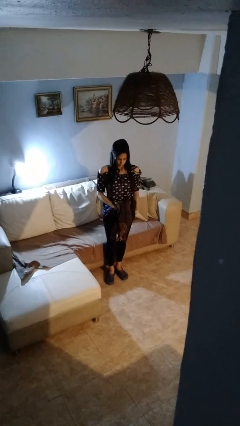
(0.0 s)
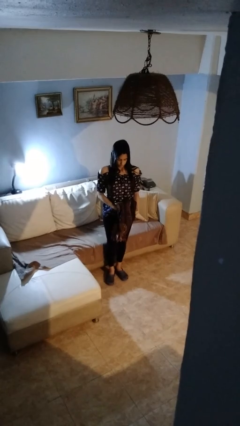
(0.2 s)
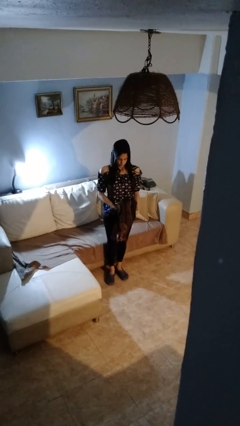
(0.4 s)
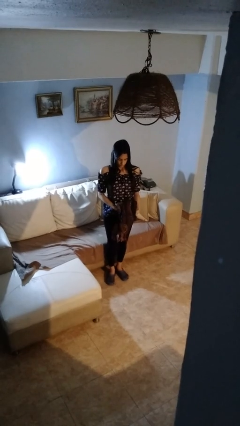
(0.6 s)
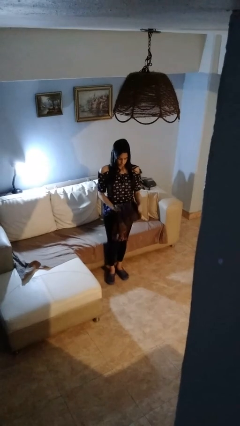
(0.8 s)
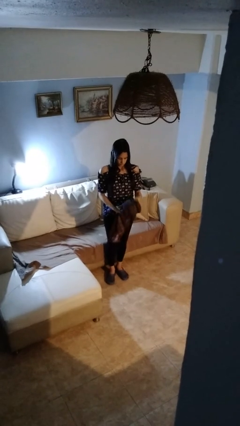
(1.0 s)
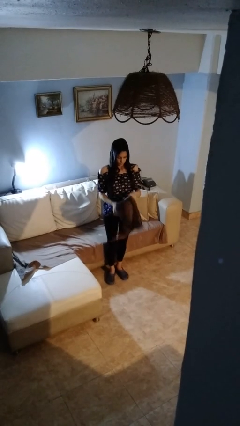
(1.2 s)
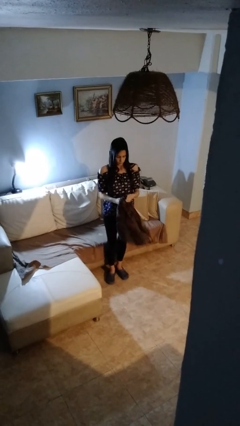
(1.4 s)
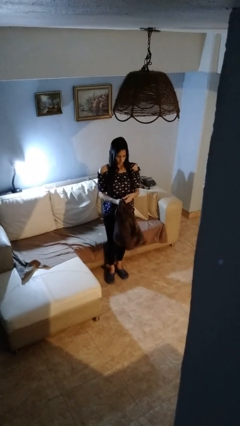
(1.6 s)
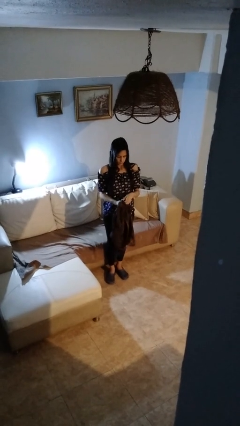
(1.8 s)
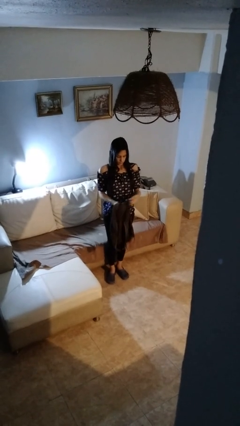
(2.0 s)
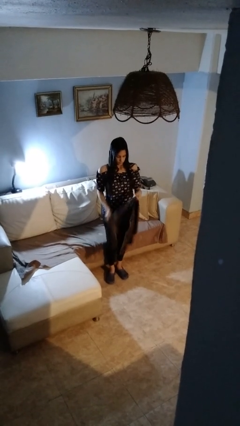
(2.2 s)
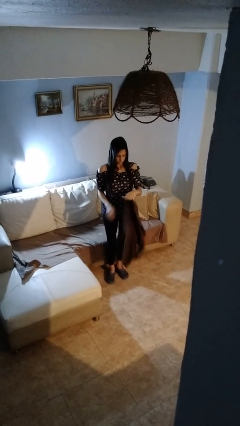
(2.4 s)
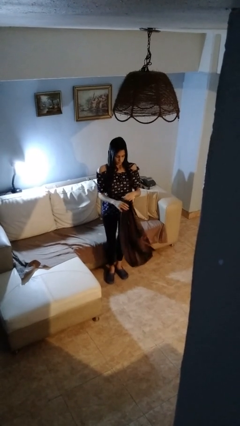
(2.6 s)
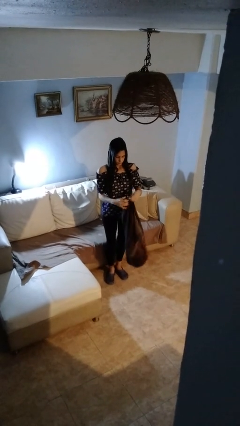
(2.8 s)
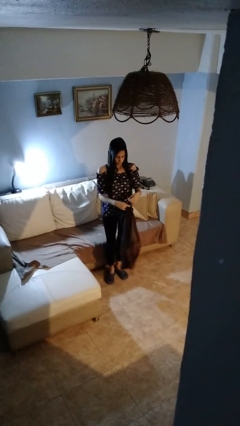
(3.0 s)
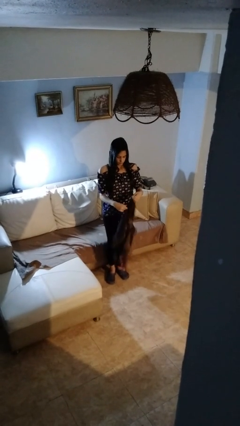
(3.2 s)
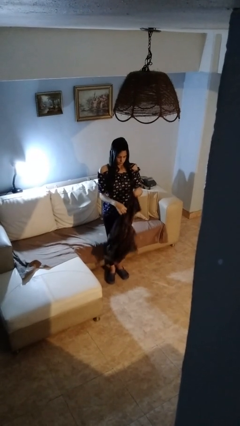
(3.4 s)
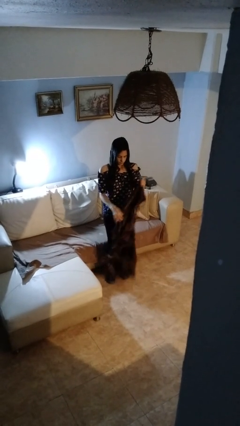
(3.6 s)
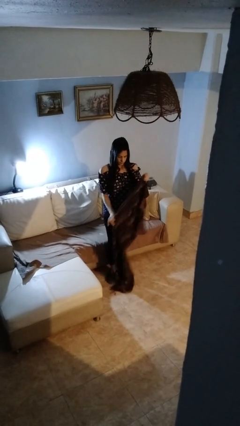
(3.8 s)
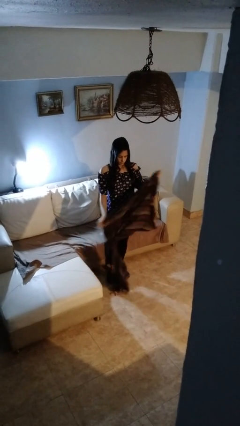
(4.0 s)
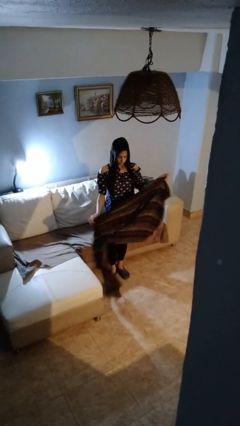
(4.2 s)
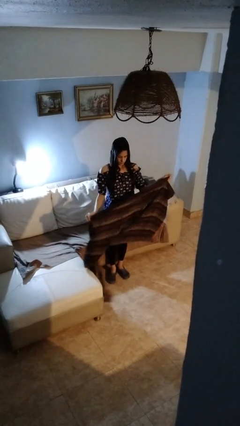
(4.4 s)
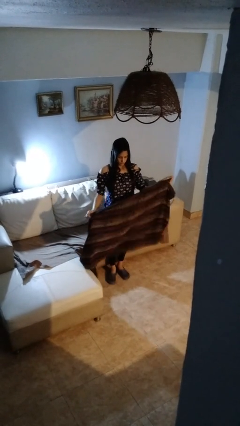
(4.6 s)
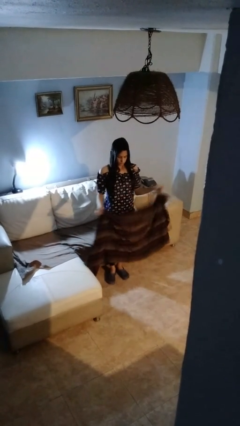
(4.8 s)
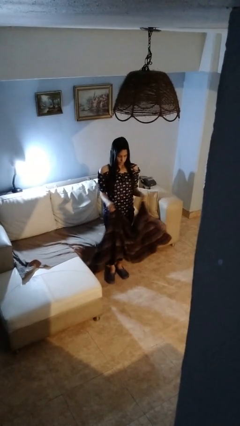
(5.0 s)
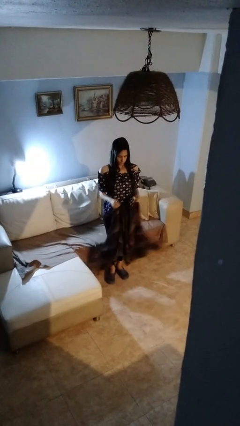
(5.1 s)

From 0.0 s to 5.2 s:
person unfolds blanket

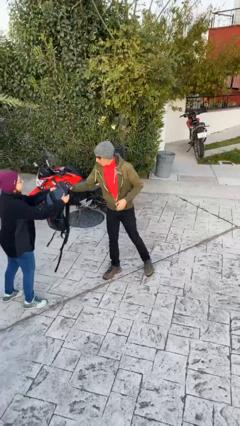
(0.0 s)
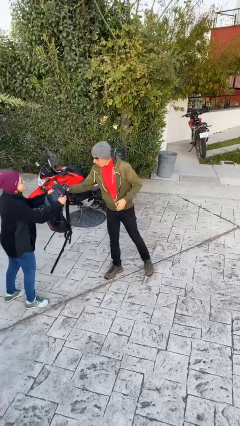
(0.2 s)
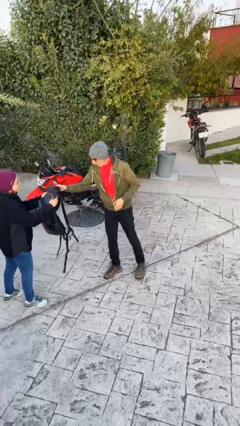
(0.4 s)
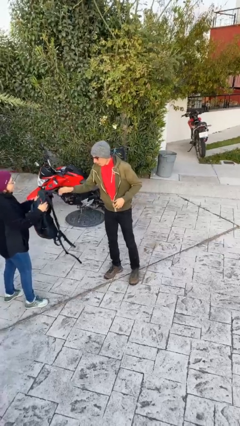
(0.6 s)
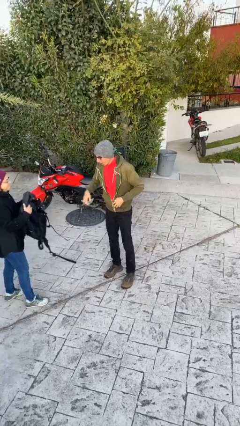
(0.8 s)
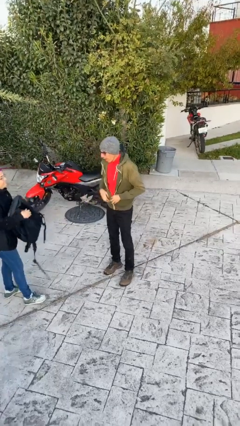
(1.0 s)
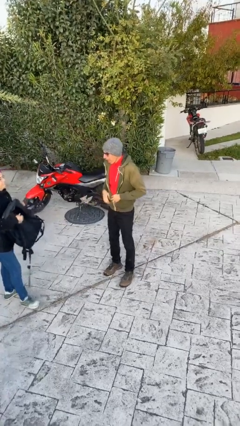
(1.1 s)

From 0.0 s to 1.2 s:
person transfers object to person

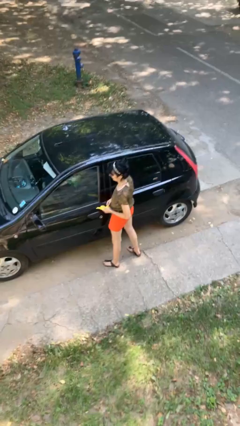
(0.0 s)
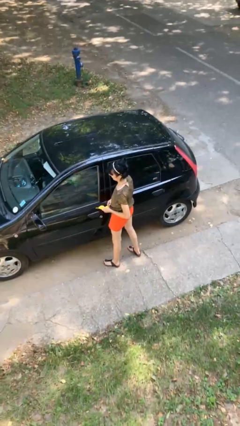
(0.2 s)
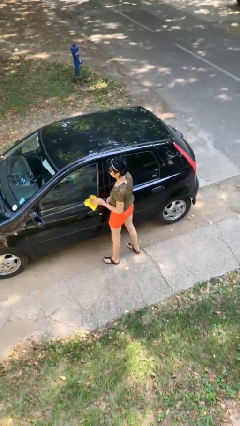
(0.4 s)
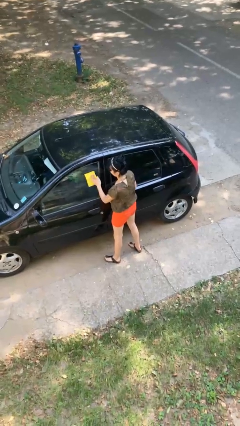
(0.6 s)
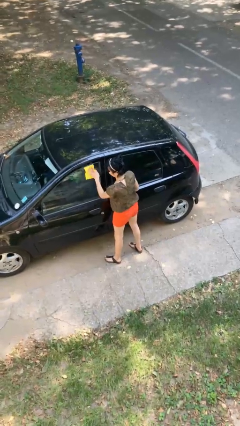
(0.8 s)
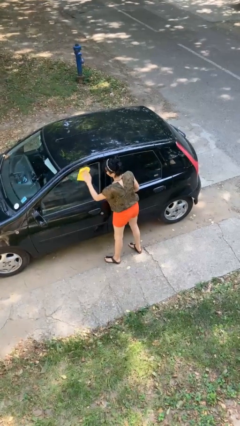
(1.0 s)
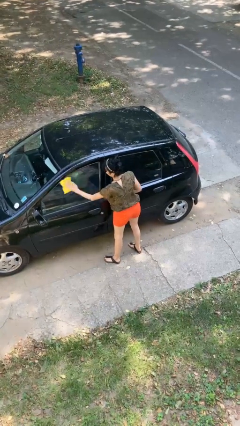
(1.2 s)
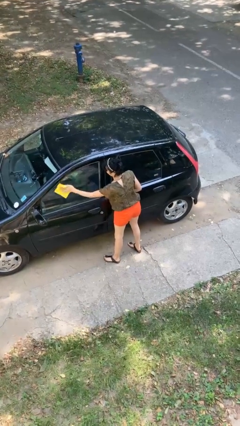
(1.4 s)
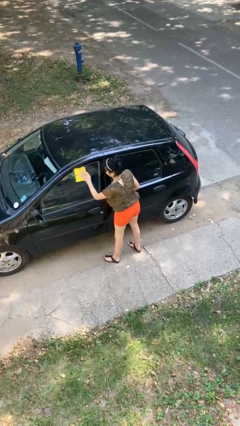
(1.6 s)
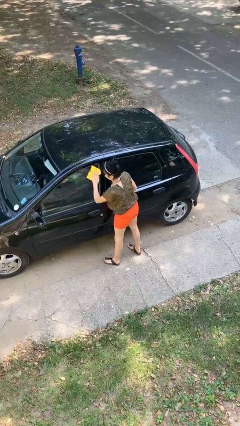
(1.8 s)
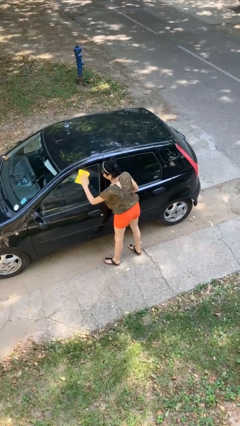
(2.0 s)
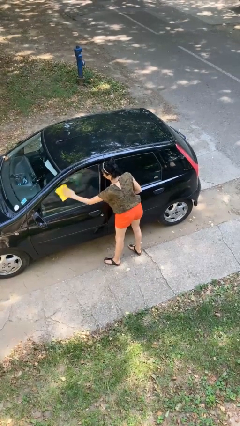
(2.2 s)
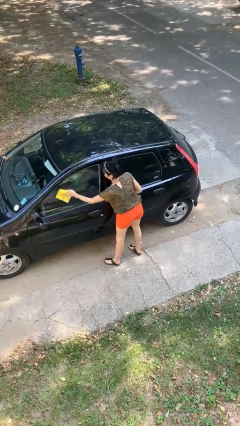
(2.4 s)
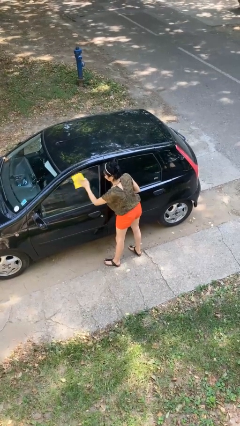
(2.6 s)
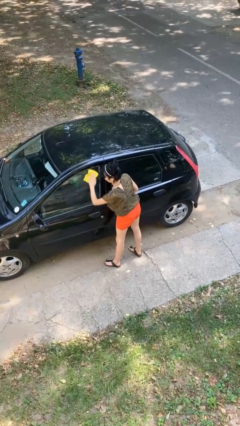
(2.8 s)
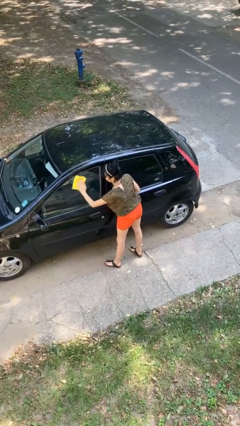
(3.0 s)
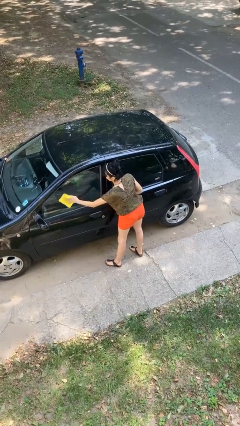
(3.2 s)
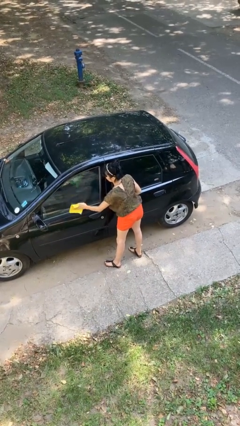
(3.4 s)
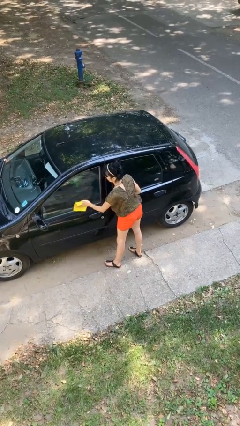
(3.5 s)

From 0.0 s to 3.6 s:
person polishes car with rag

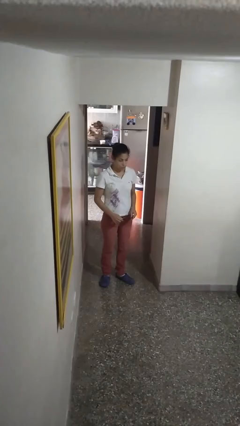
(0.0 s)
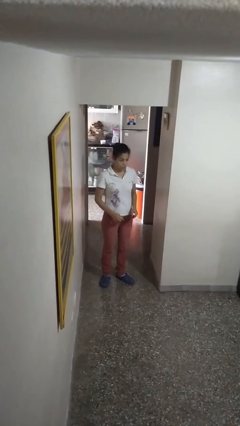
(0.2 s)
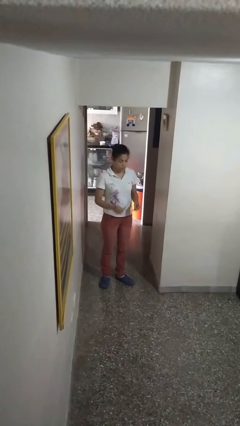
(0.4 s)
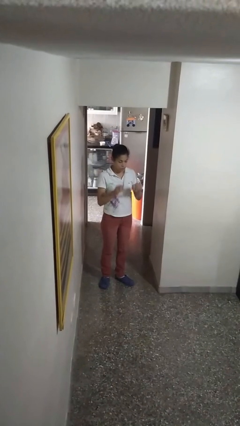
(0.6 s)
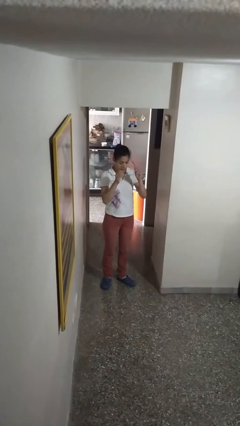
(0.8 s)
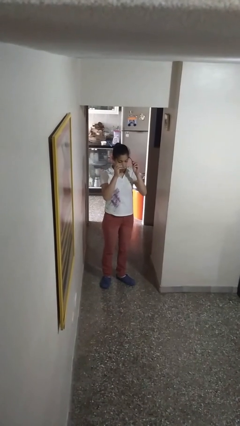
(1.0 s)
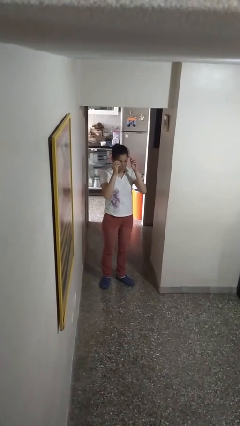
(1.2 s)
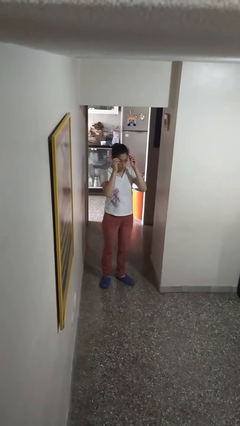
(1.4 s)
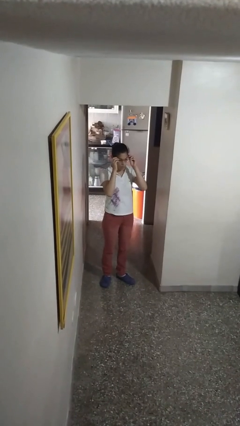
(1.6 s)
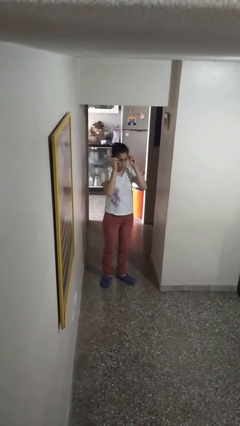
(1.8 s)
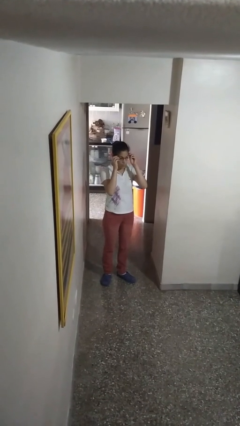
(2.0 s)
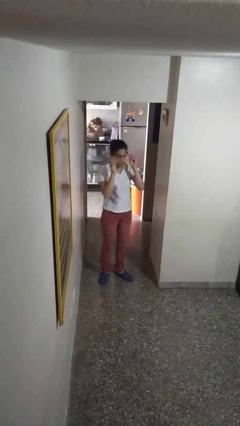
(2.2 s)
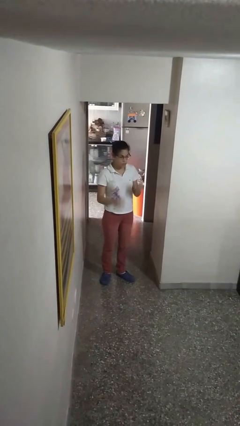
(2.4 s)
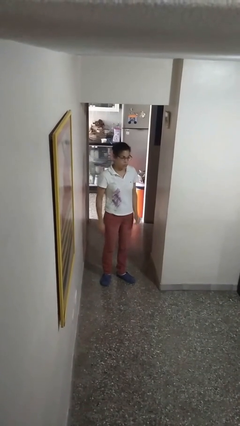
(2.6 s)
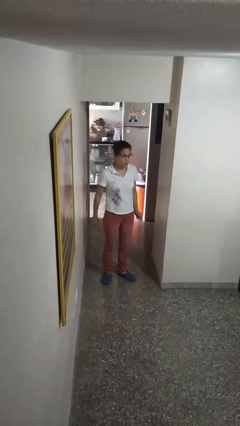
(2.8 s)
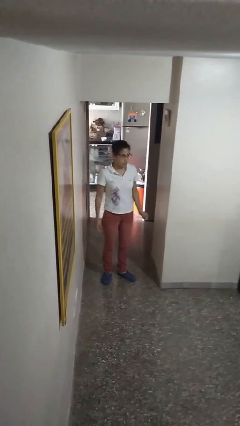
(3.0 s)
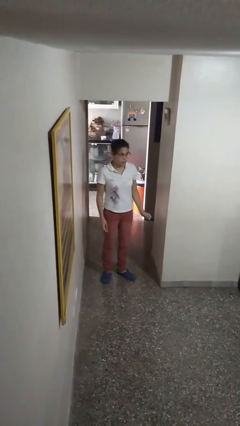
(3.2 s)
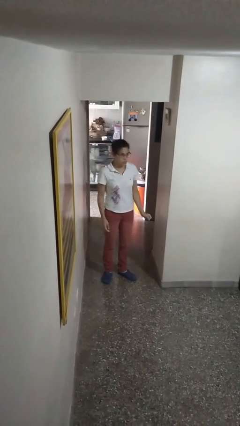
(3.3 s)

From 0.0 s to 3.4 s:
person puts on glasses

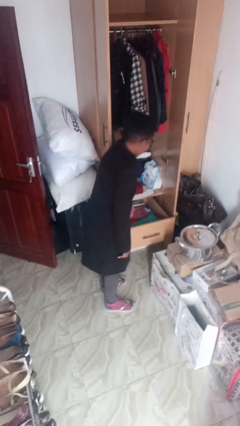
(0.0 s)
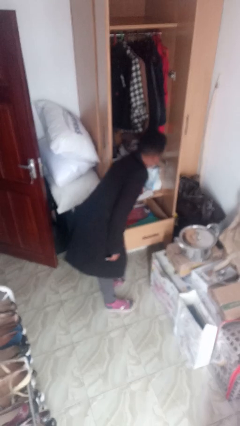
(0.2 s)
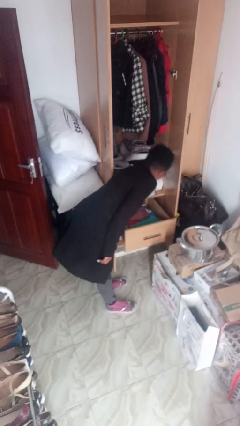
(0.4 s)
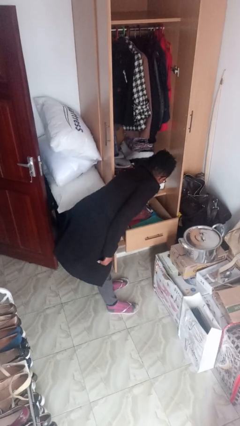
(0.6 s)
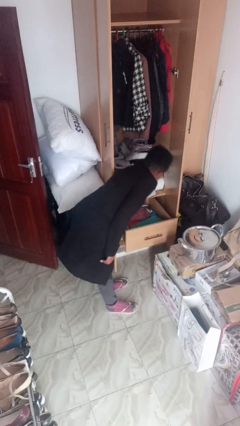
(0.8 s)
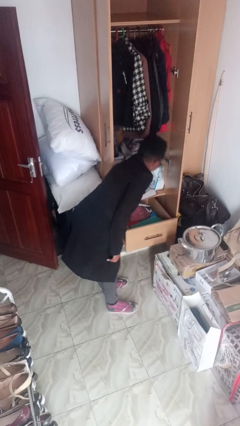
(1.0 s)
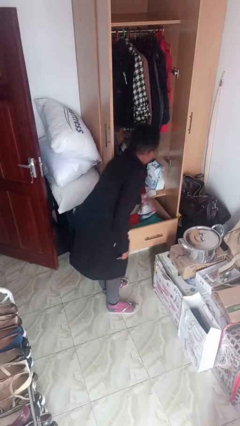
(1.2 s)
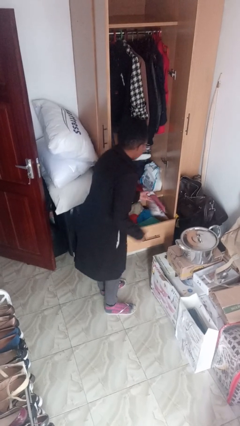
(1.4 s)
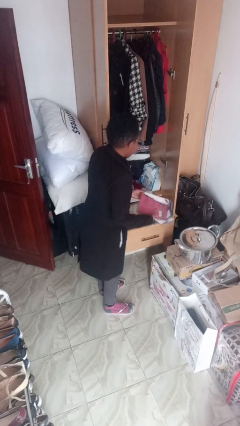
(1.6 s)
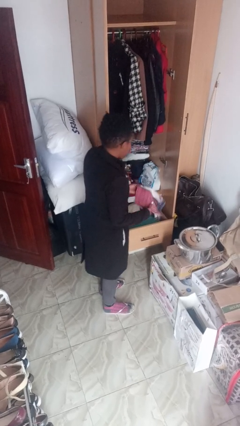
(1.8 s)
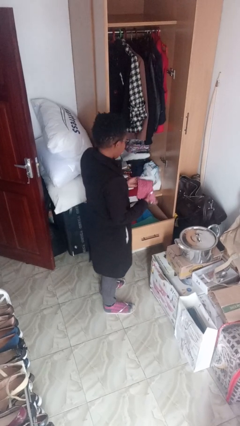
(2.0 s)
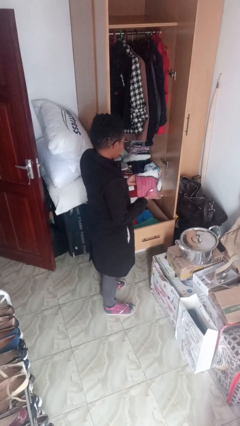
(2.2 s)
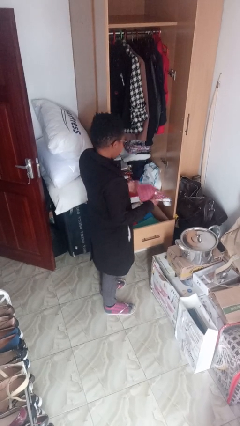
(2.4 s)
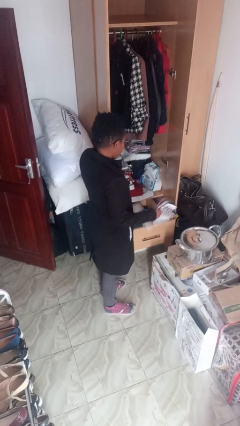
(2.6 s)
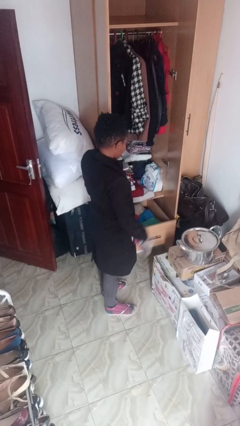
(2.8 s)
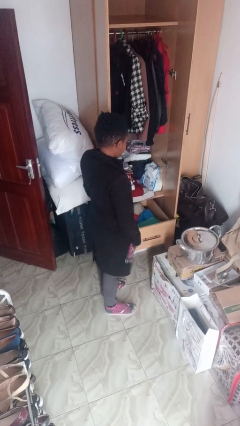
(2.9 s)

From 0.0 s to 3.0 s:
person takes clothes from dresser

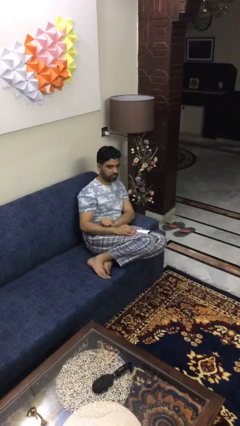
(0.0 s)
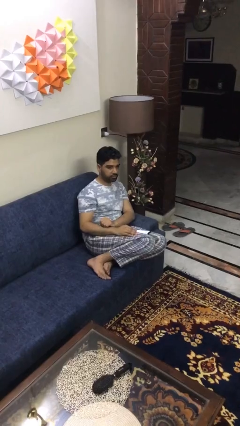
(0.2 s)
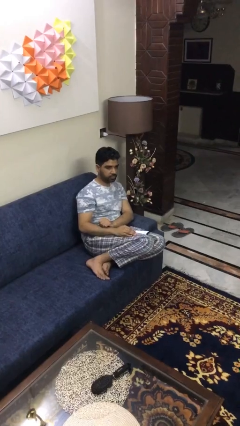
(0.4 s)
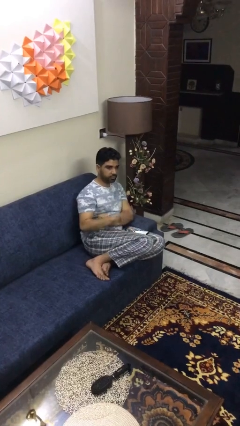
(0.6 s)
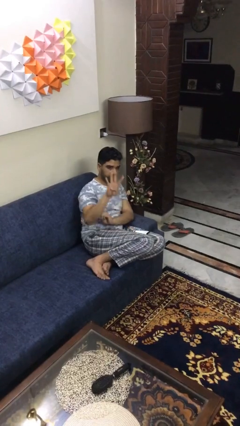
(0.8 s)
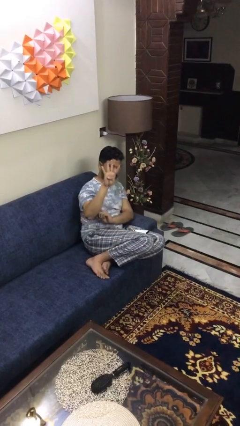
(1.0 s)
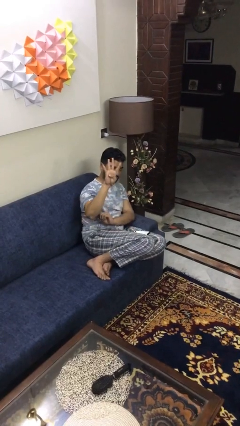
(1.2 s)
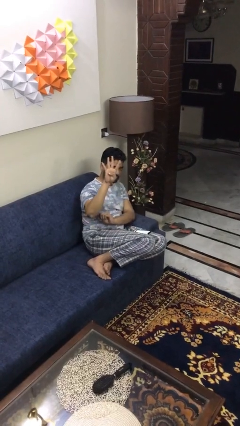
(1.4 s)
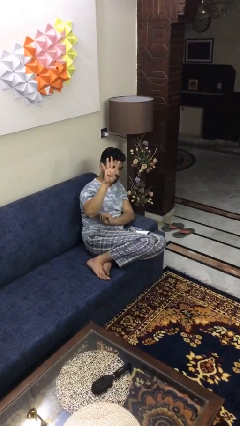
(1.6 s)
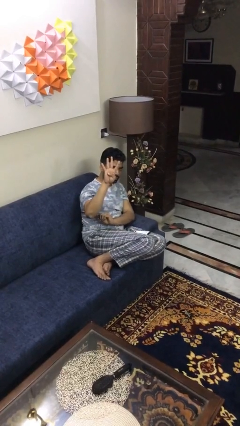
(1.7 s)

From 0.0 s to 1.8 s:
person gestures number four
